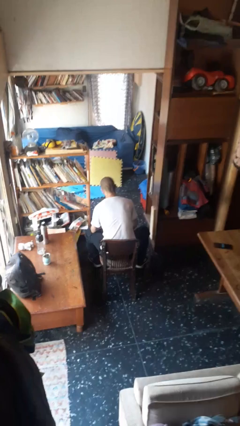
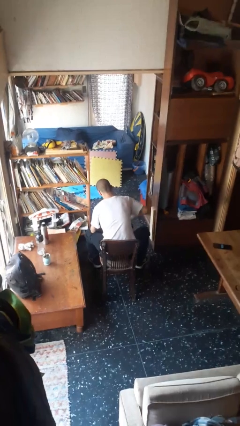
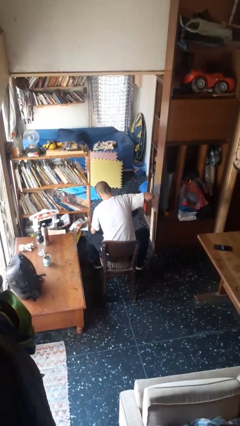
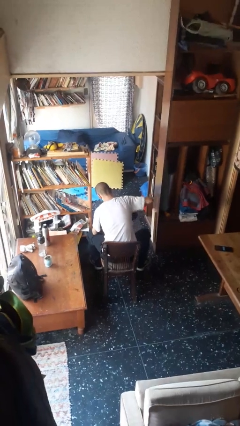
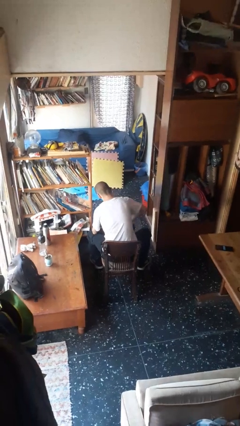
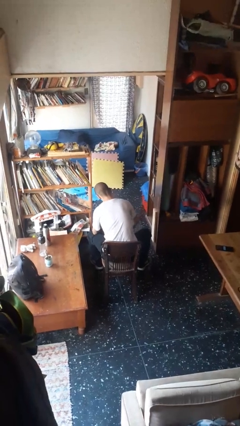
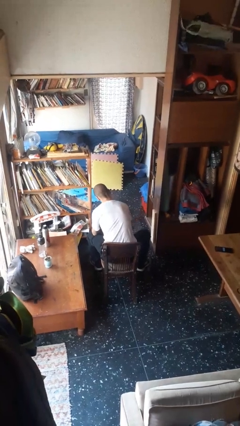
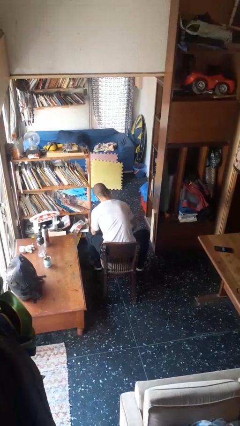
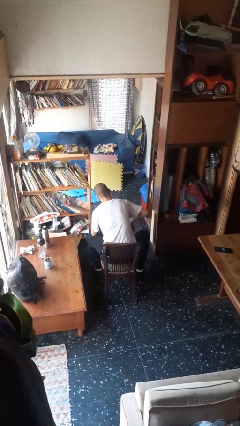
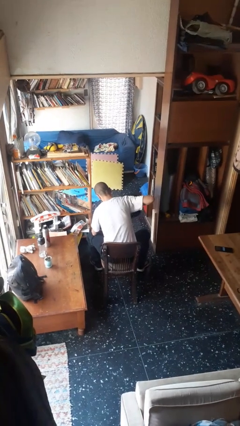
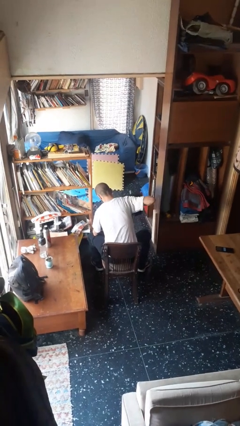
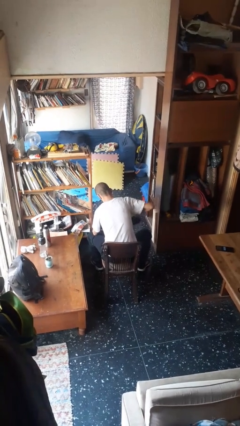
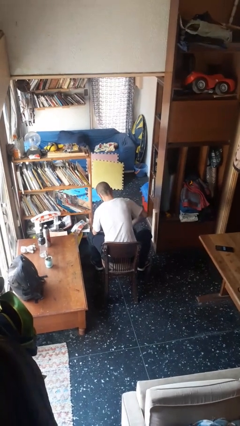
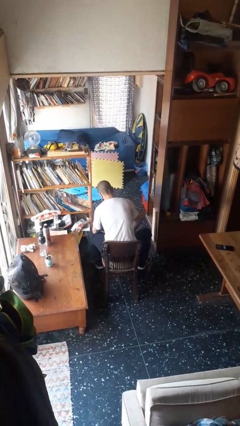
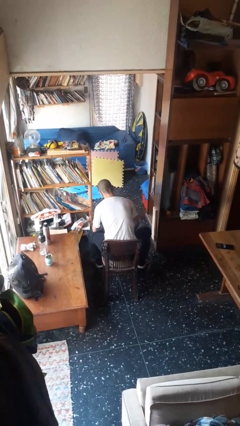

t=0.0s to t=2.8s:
person lifts dumbbells

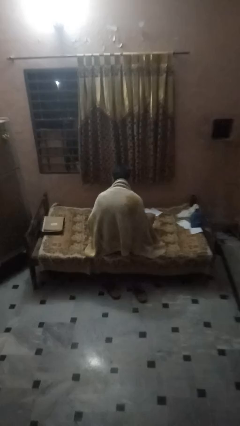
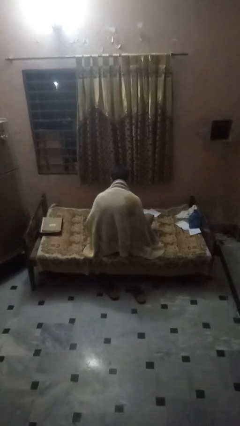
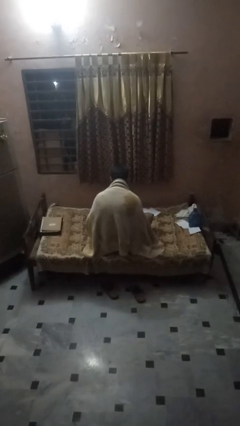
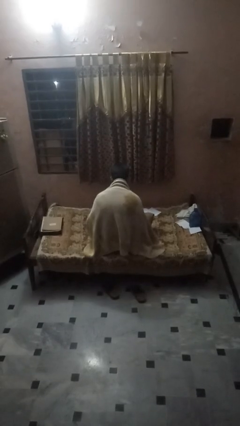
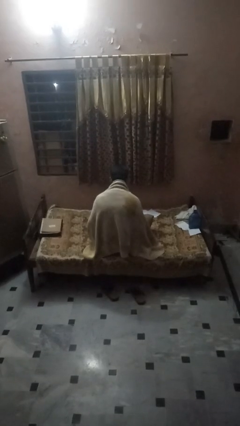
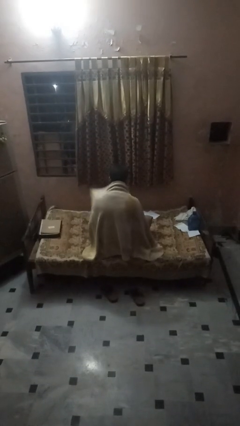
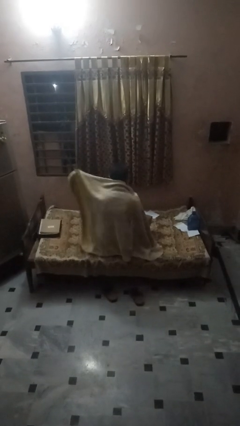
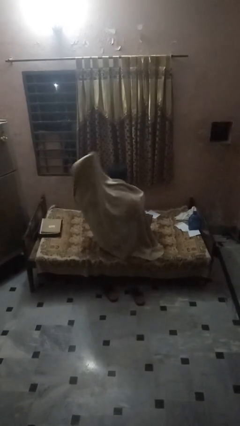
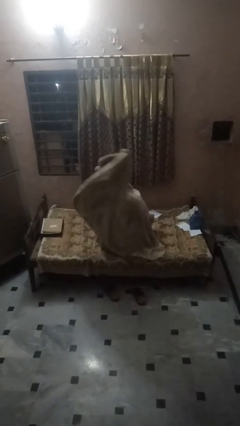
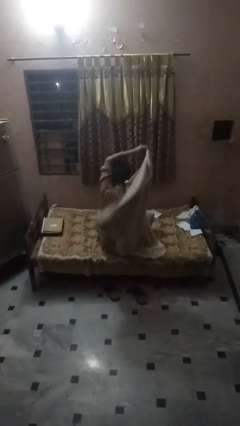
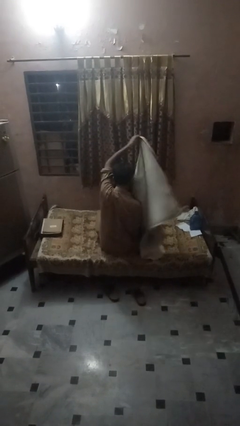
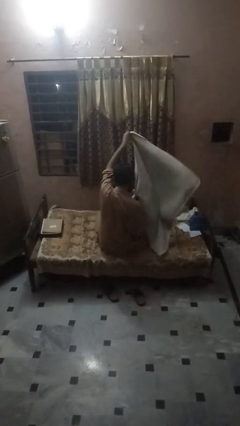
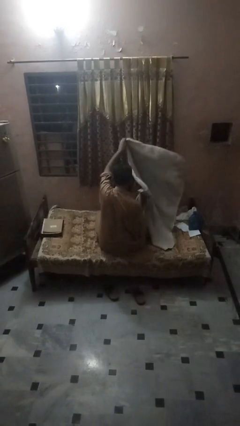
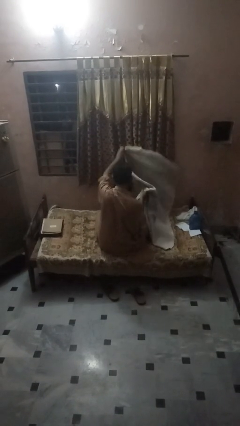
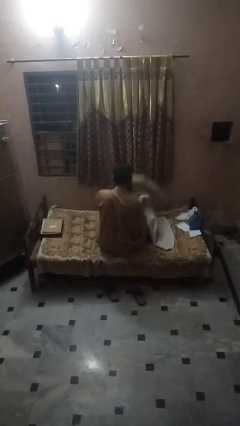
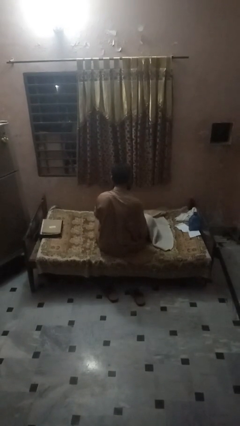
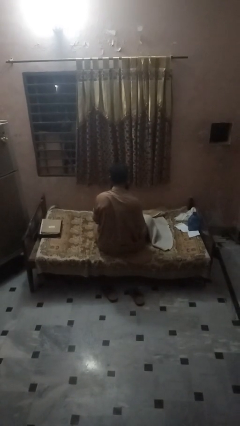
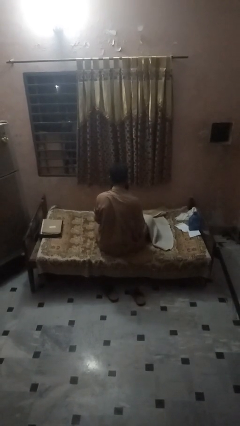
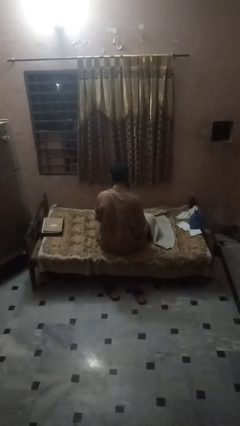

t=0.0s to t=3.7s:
person uncovers with blanket

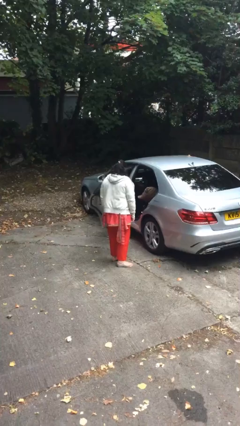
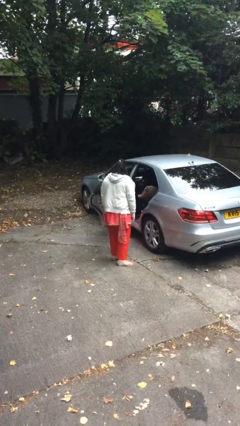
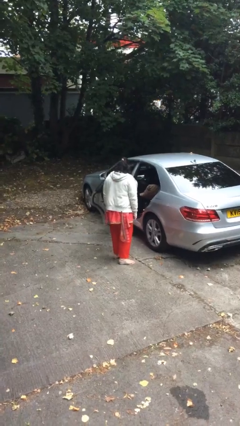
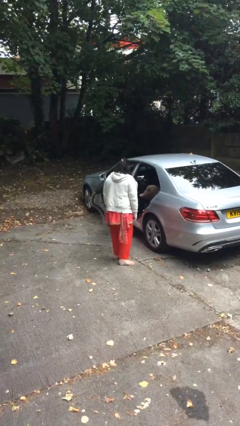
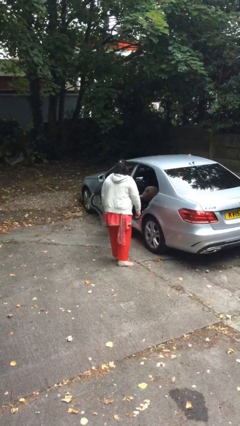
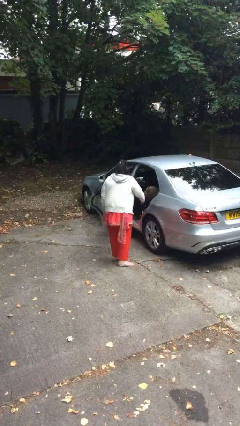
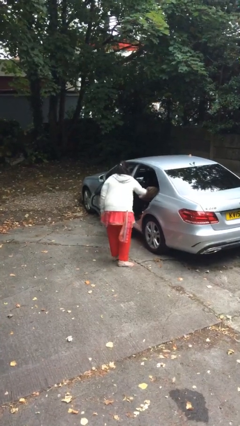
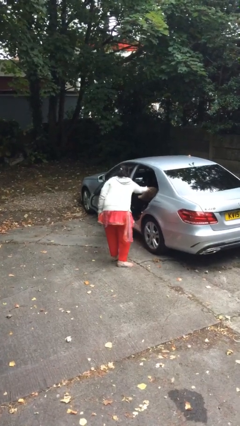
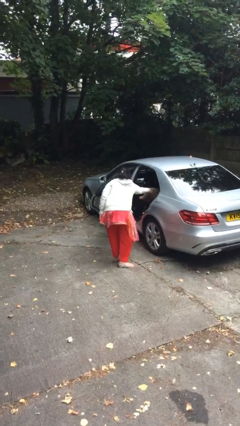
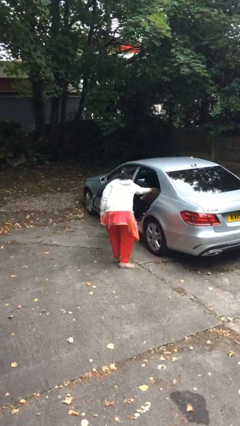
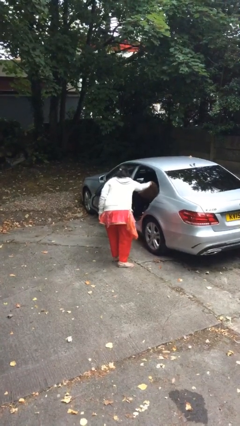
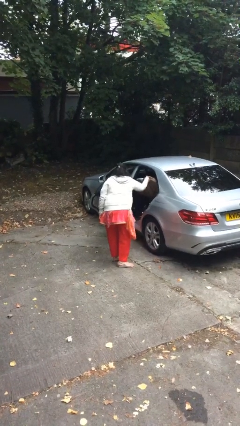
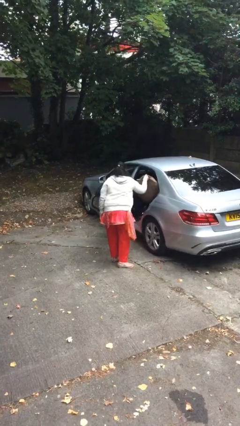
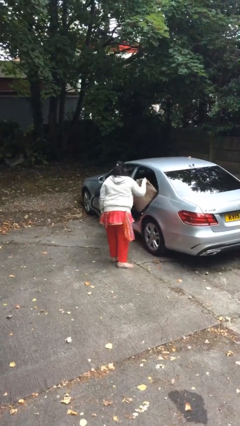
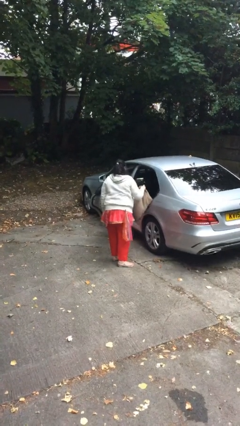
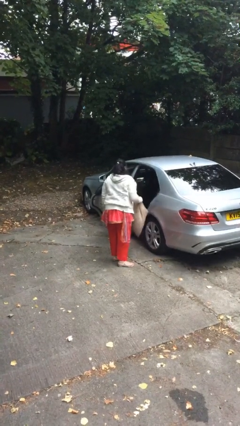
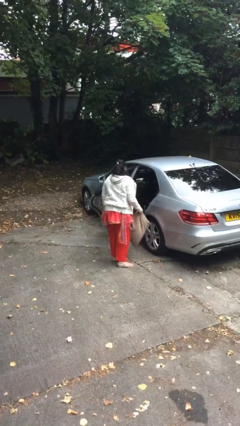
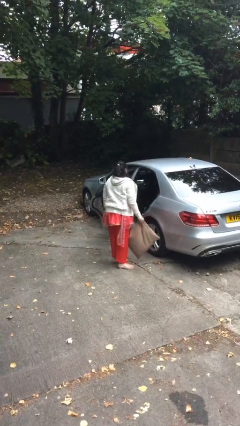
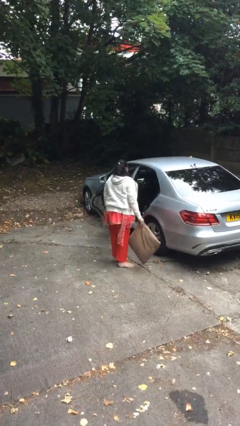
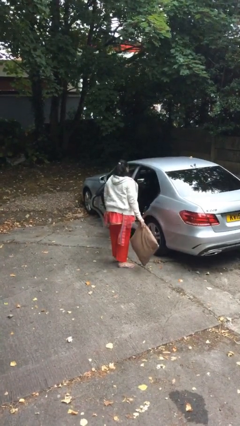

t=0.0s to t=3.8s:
person unloads car

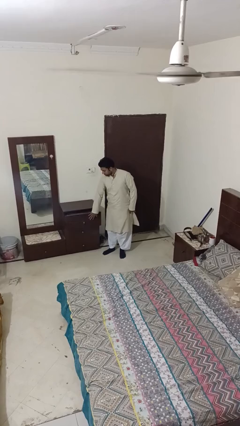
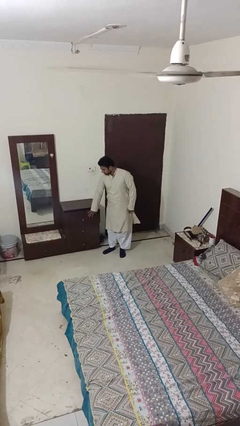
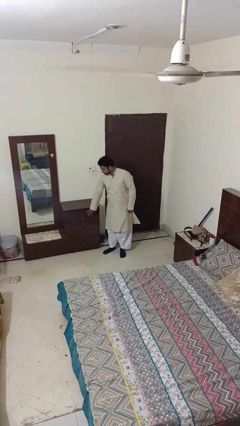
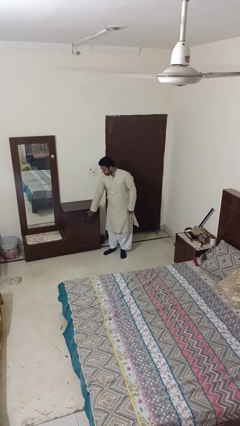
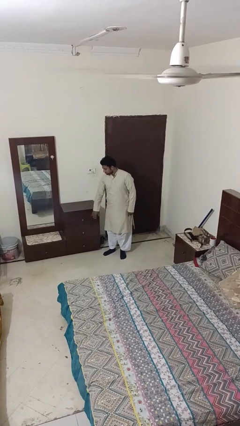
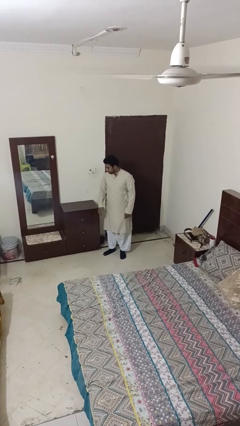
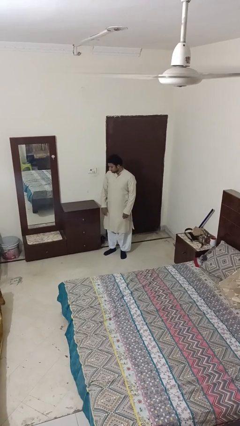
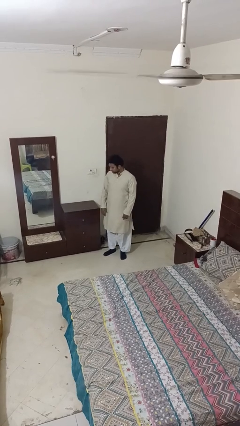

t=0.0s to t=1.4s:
person closes dresser drawer

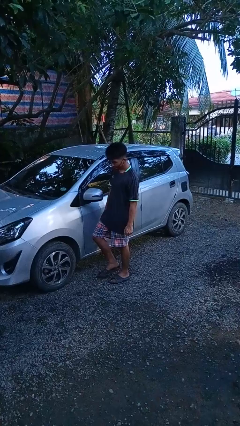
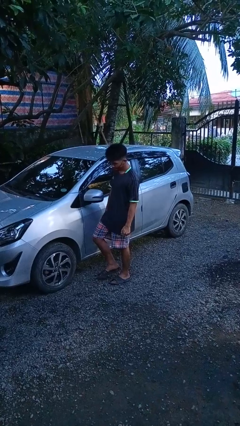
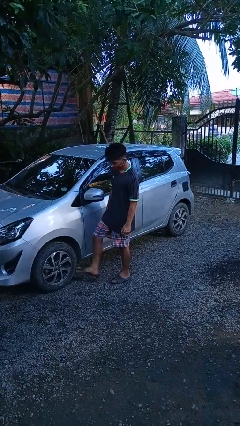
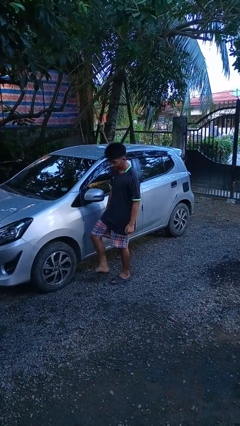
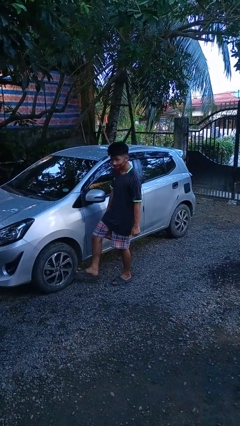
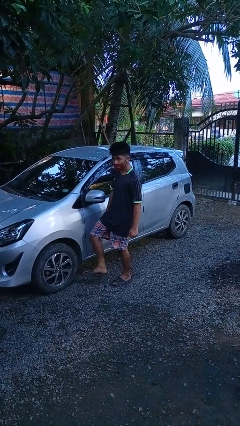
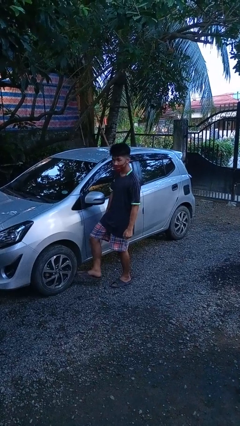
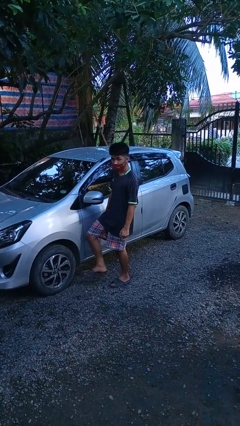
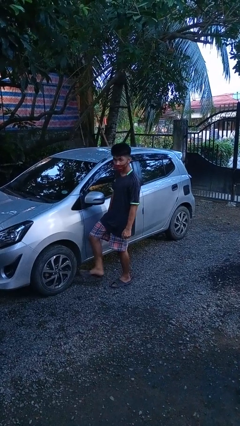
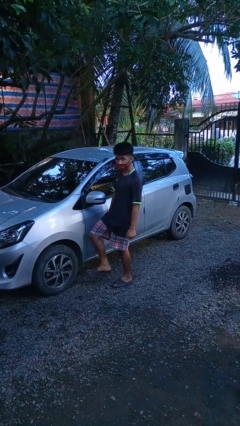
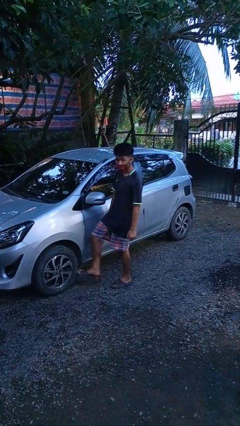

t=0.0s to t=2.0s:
person kicks car tires

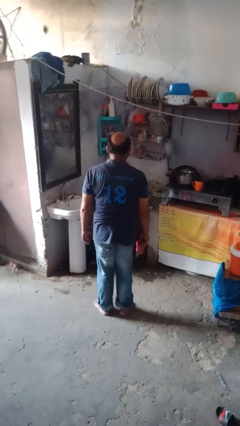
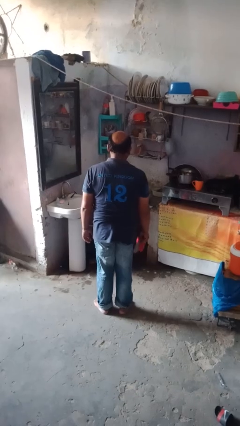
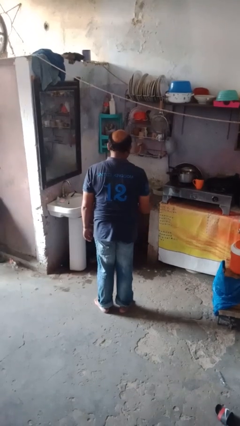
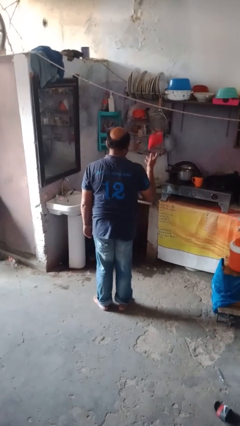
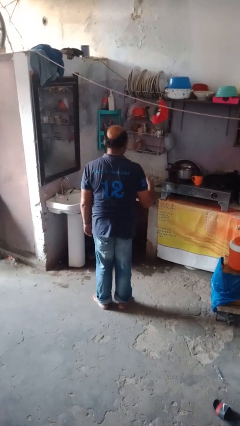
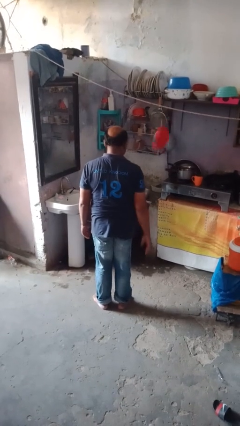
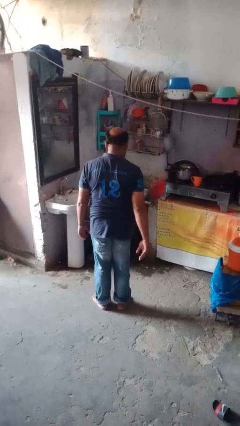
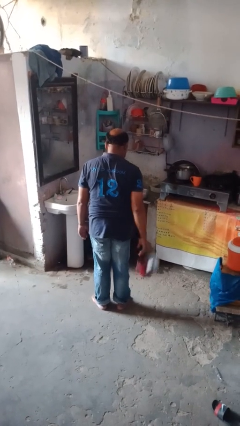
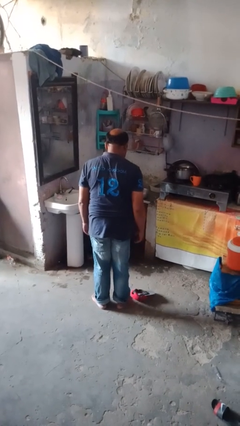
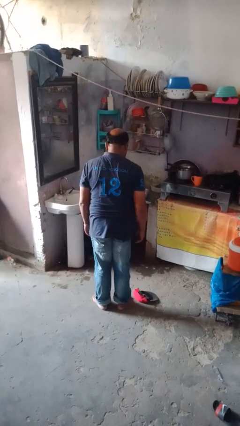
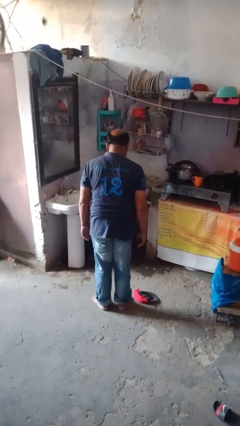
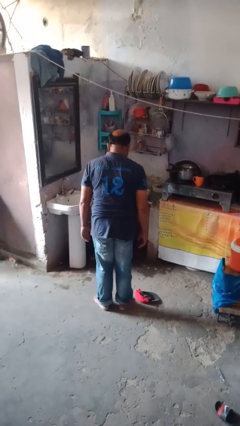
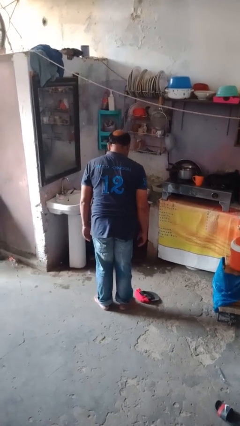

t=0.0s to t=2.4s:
person throws object into air

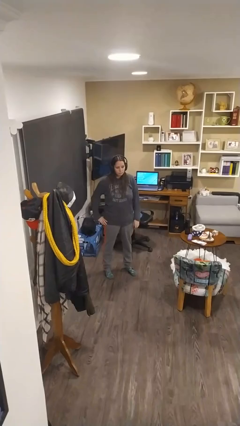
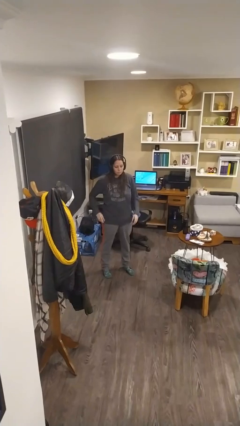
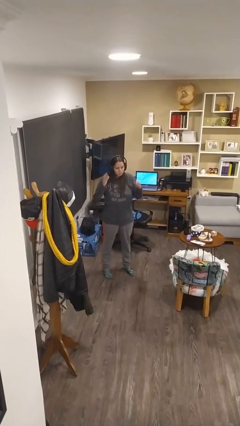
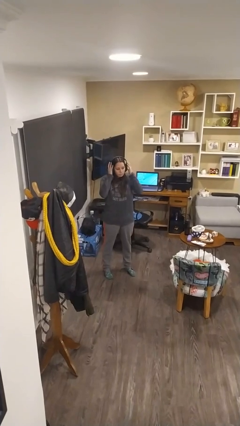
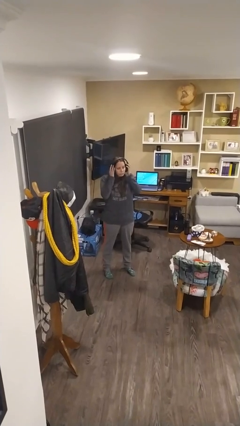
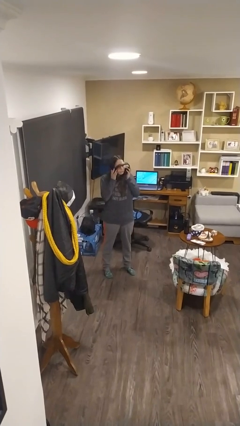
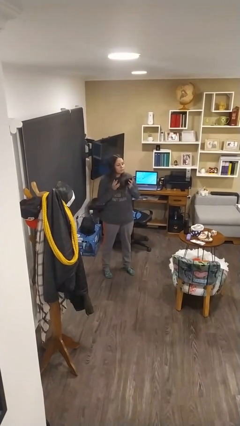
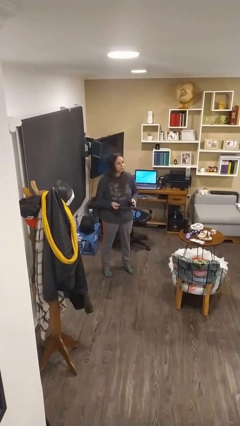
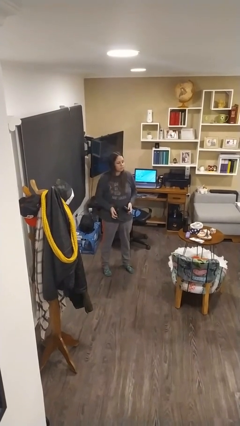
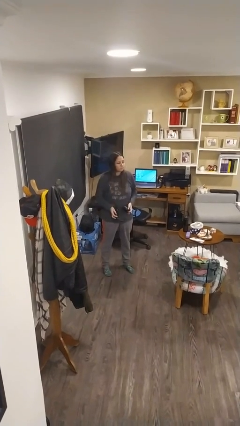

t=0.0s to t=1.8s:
person takes off headphones
